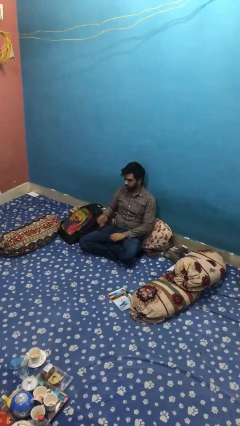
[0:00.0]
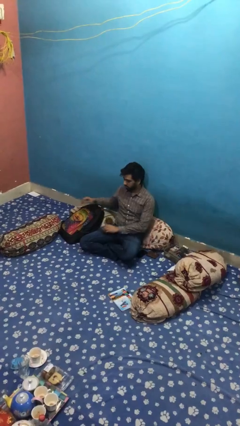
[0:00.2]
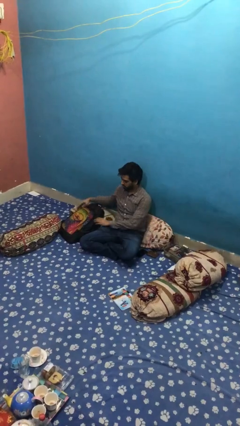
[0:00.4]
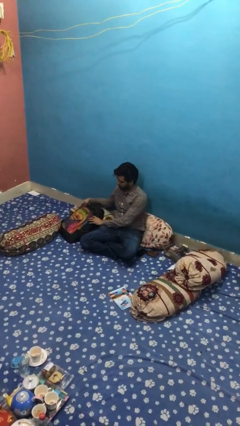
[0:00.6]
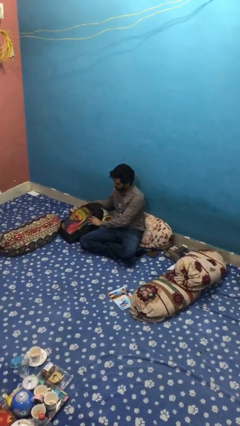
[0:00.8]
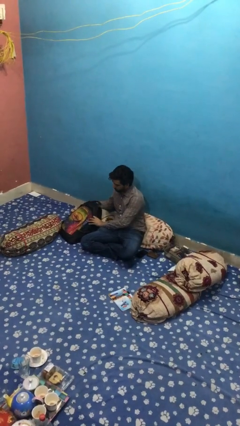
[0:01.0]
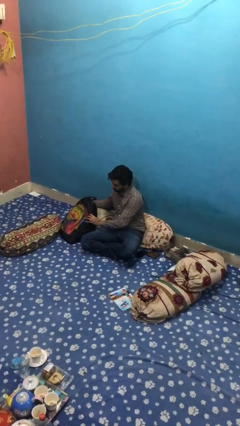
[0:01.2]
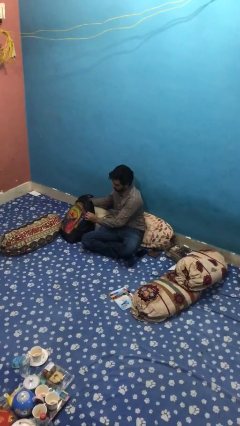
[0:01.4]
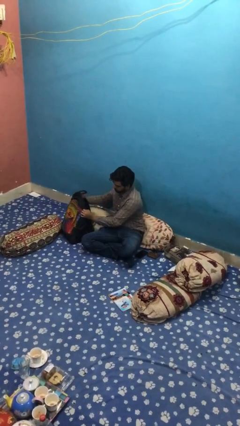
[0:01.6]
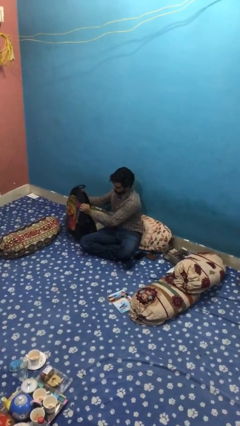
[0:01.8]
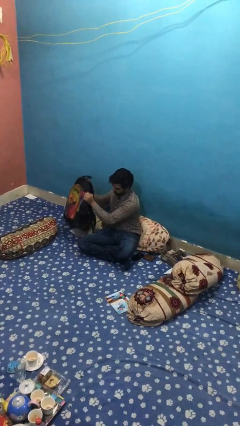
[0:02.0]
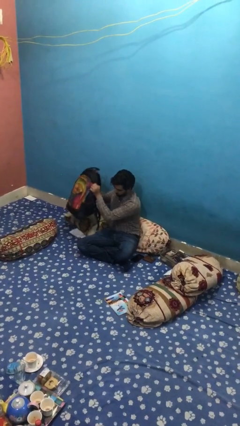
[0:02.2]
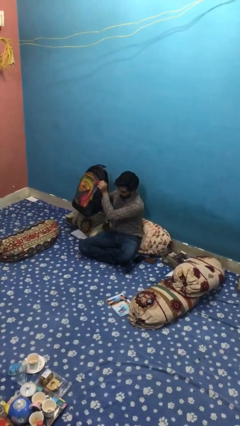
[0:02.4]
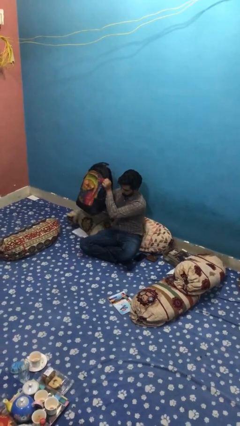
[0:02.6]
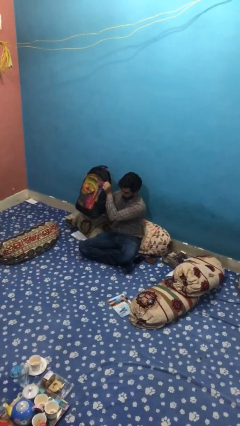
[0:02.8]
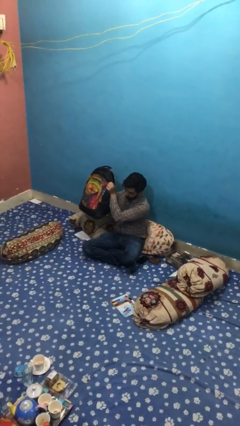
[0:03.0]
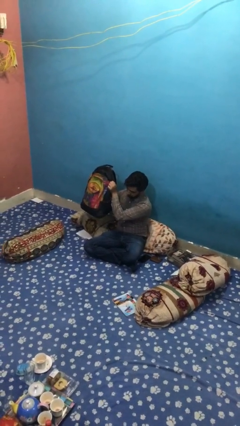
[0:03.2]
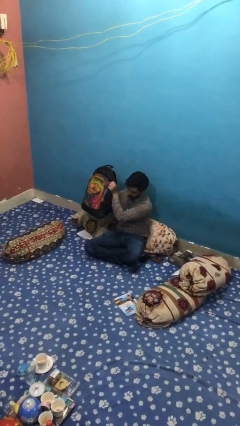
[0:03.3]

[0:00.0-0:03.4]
person picks up object from floor

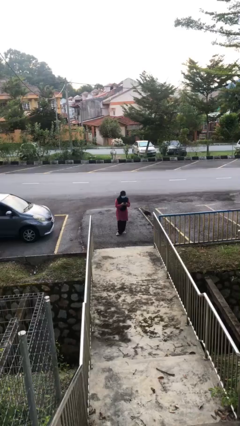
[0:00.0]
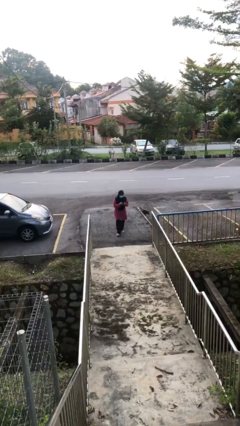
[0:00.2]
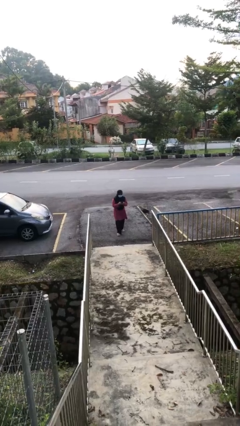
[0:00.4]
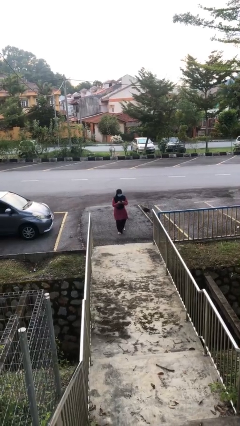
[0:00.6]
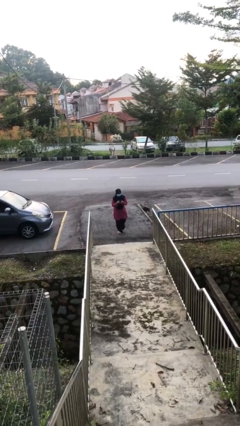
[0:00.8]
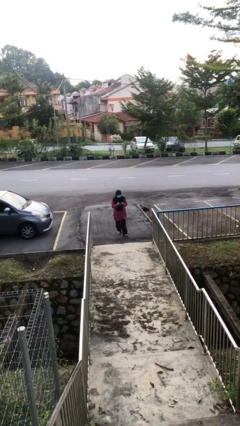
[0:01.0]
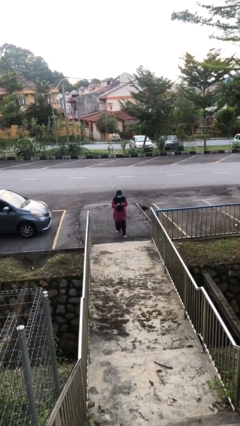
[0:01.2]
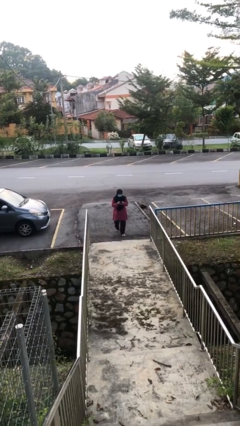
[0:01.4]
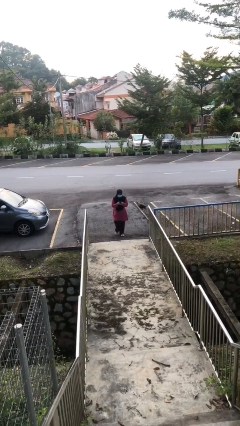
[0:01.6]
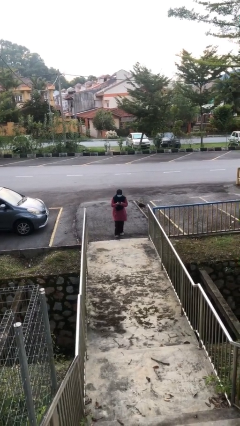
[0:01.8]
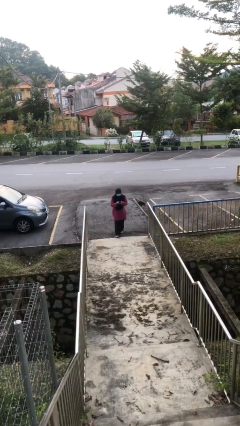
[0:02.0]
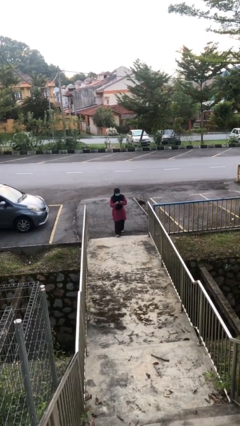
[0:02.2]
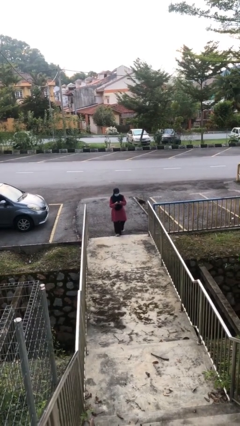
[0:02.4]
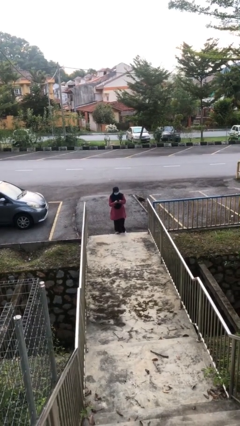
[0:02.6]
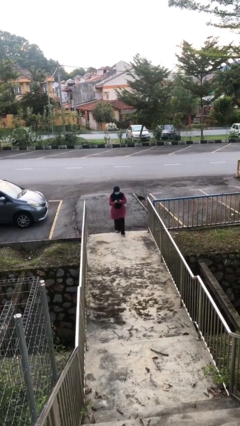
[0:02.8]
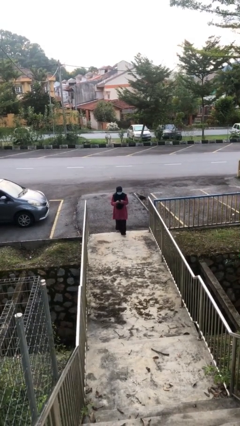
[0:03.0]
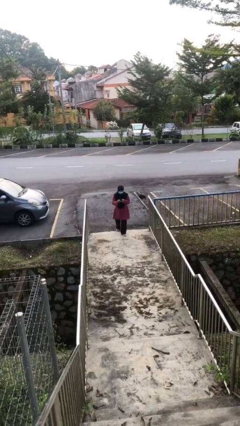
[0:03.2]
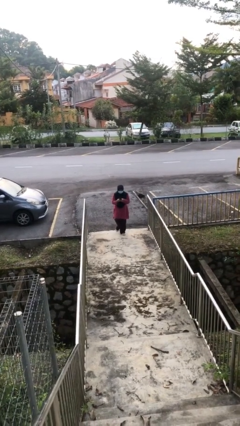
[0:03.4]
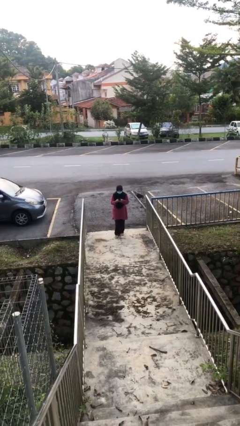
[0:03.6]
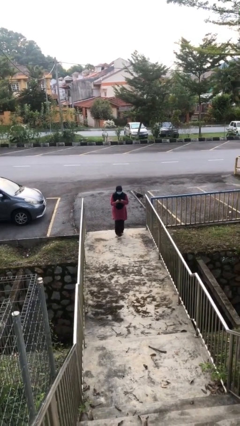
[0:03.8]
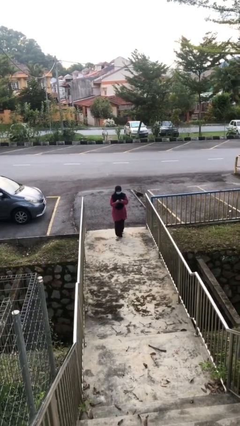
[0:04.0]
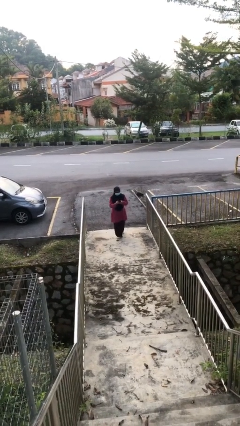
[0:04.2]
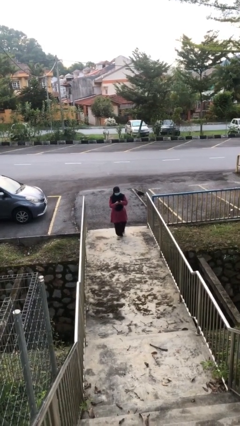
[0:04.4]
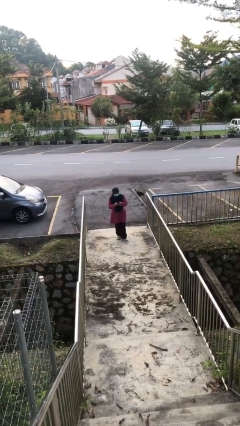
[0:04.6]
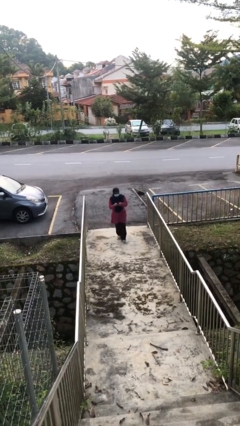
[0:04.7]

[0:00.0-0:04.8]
person texts on phone

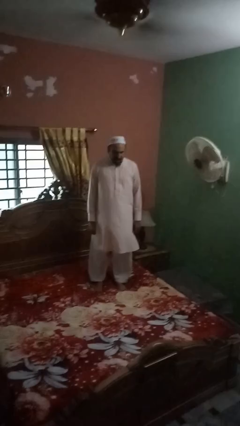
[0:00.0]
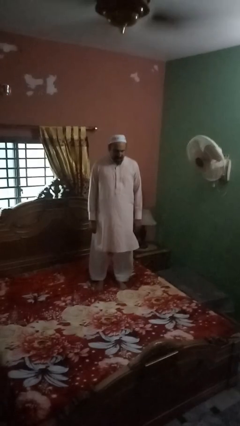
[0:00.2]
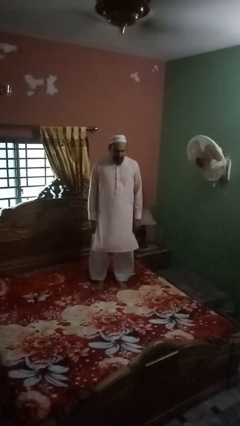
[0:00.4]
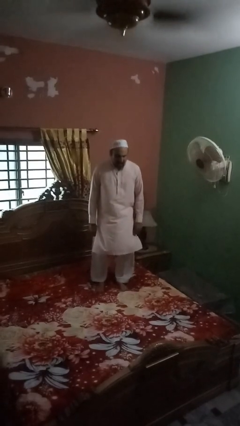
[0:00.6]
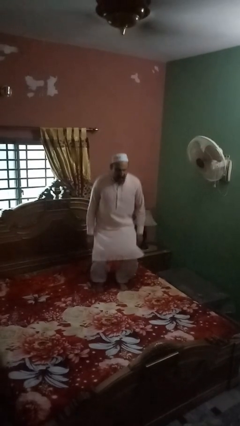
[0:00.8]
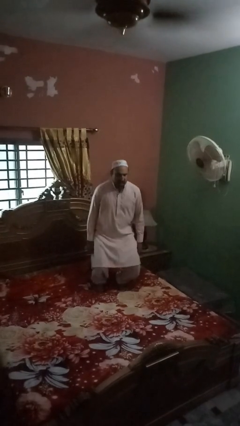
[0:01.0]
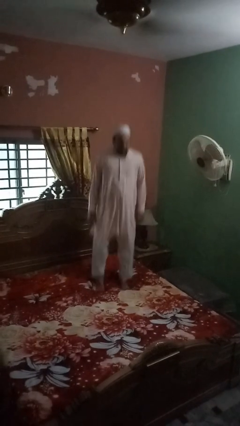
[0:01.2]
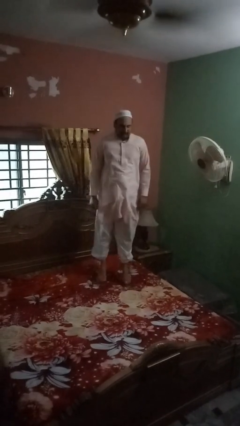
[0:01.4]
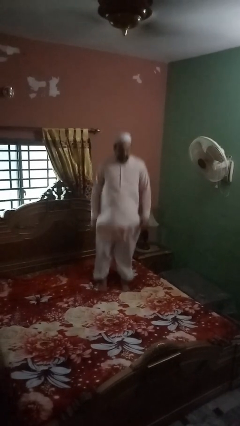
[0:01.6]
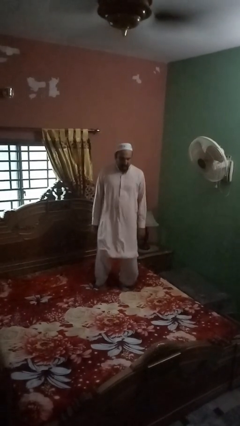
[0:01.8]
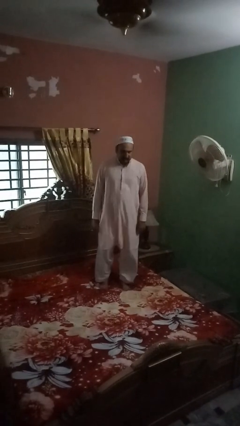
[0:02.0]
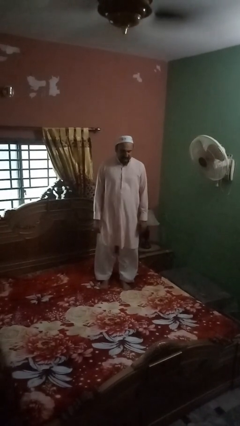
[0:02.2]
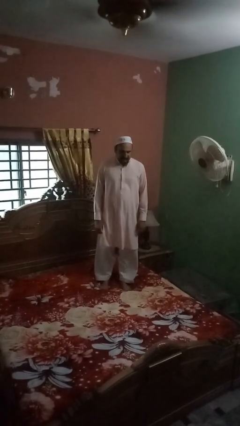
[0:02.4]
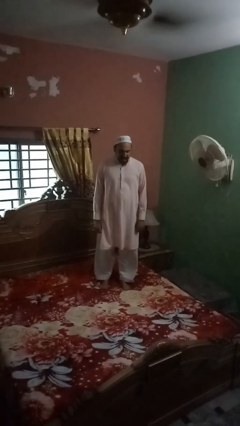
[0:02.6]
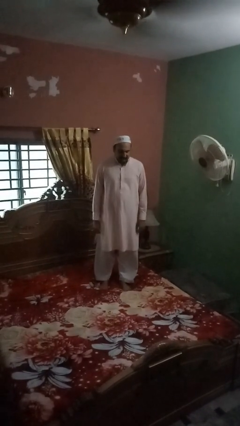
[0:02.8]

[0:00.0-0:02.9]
person jumps on bed

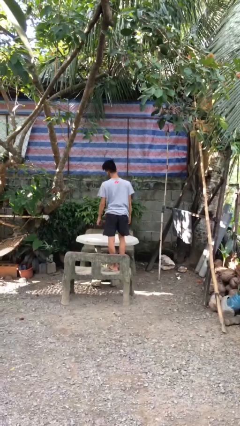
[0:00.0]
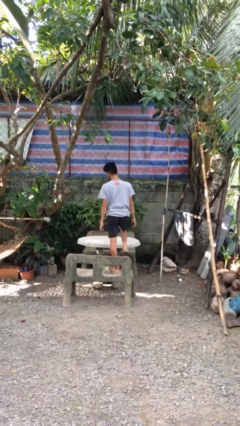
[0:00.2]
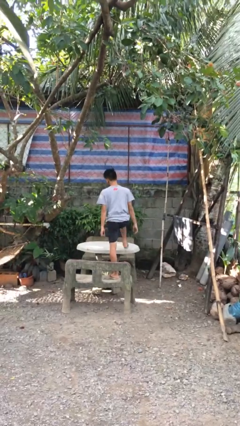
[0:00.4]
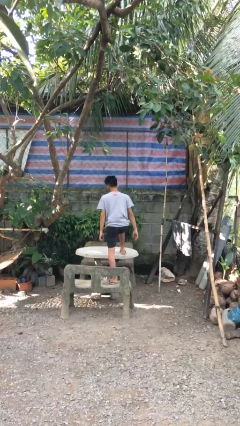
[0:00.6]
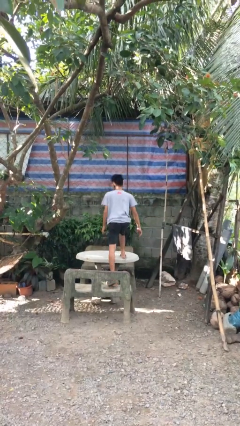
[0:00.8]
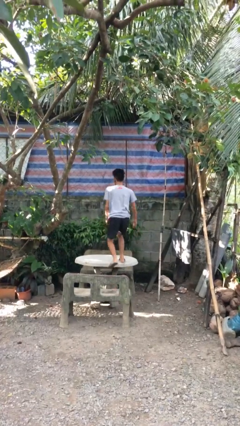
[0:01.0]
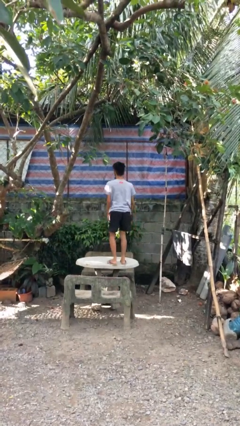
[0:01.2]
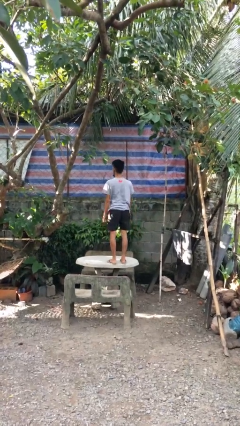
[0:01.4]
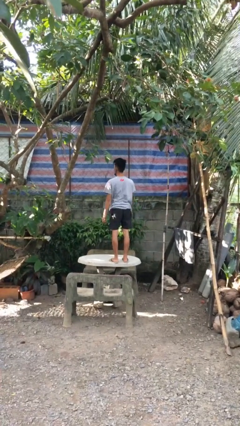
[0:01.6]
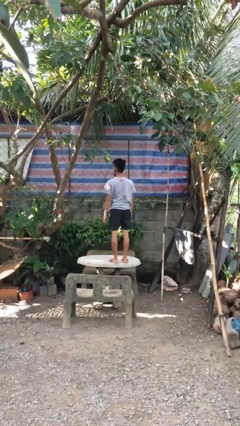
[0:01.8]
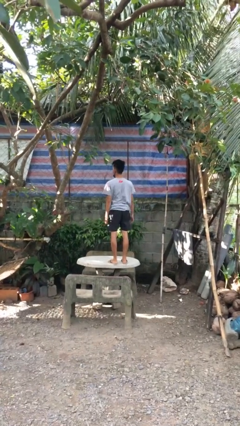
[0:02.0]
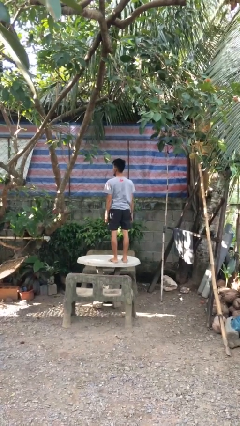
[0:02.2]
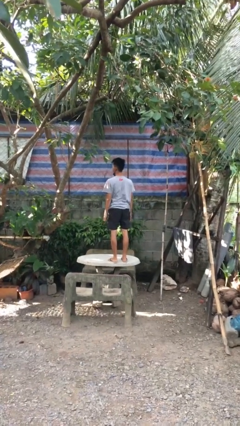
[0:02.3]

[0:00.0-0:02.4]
person climbs on table

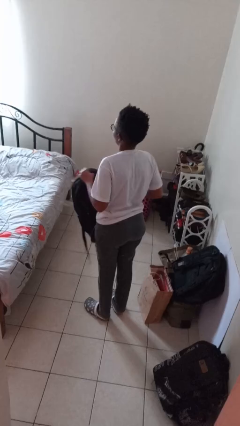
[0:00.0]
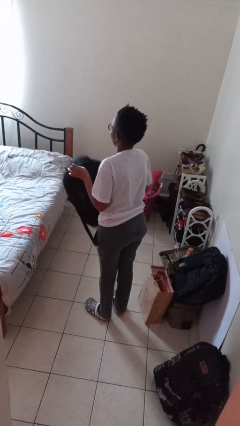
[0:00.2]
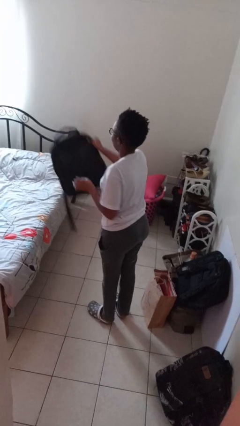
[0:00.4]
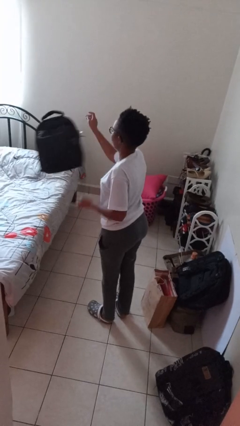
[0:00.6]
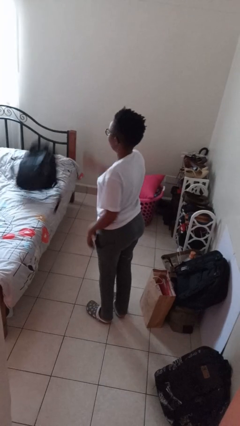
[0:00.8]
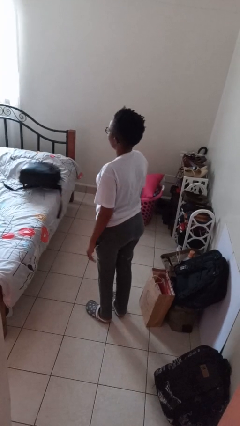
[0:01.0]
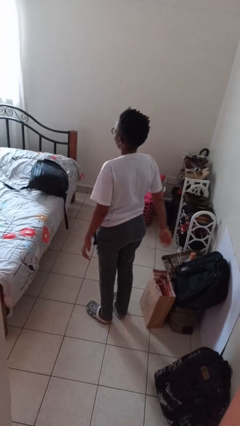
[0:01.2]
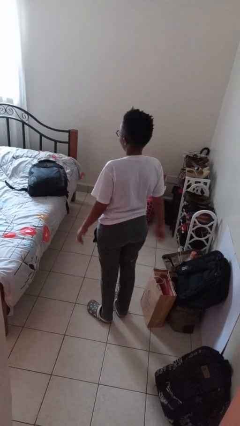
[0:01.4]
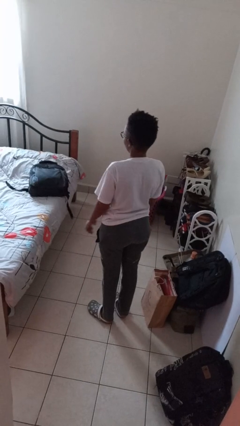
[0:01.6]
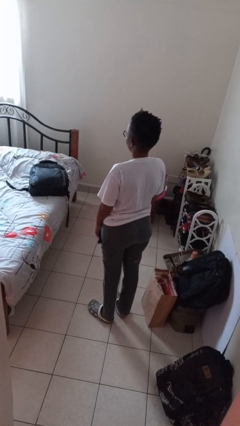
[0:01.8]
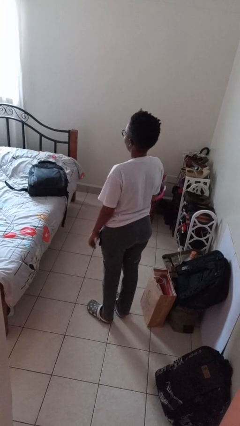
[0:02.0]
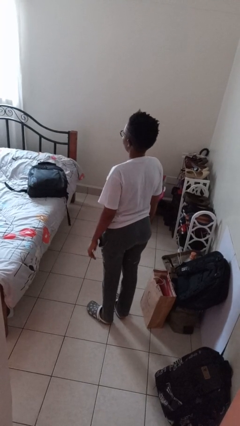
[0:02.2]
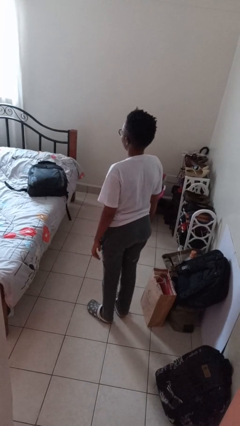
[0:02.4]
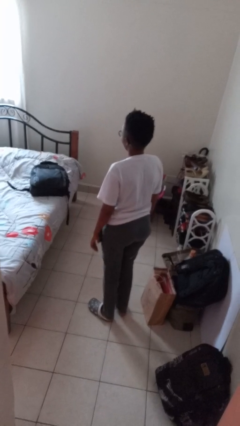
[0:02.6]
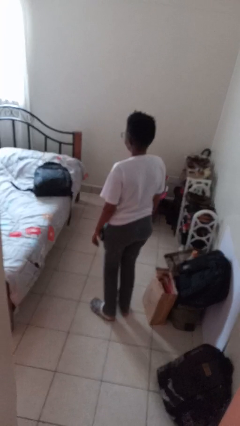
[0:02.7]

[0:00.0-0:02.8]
person throws object on bed

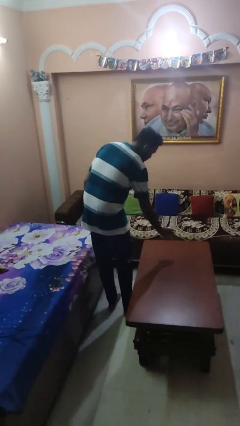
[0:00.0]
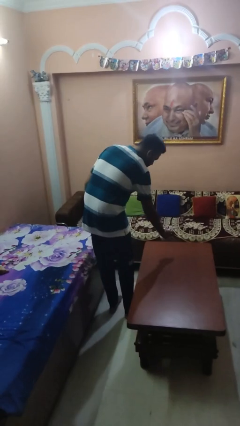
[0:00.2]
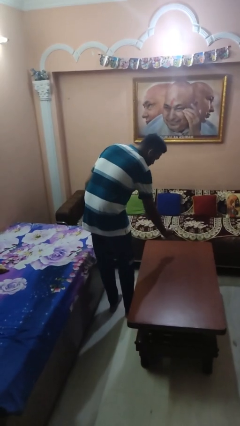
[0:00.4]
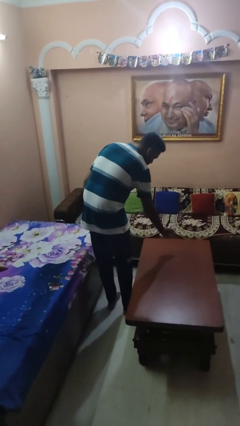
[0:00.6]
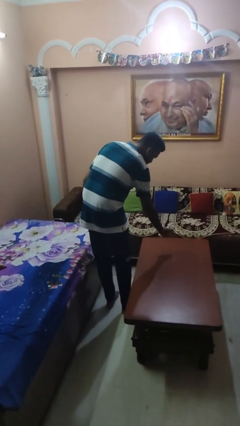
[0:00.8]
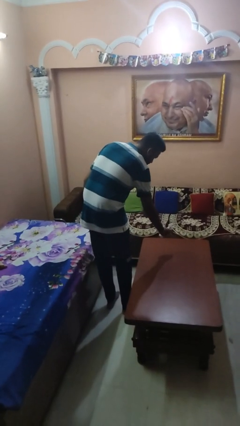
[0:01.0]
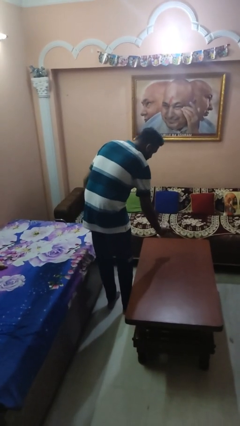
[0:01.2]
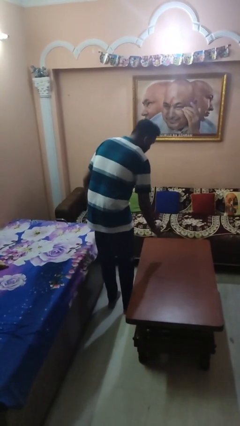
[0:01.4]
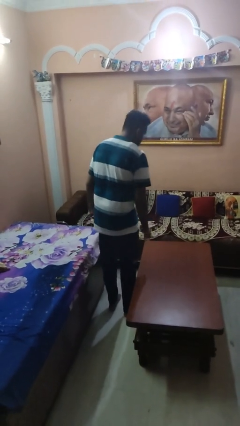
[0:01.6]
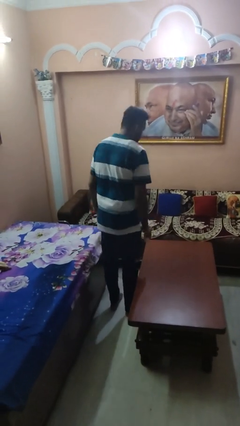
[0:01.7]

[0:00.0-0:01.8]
person sprays from bottle
